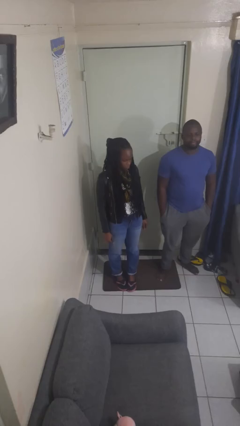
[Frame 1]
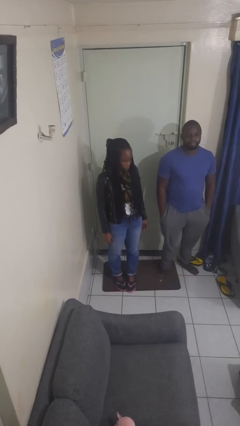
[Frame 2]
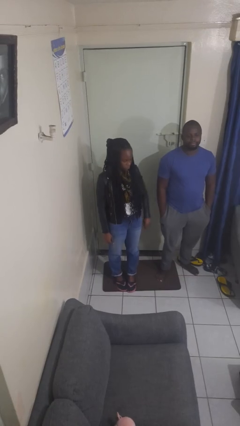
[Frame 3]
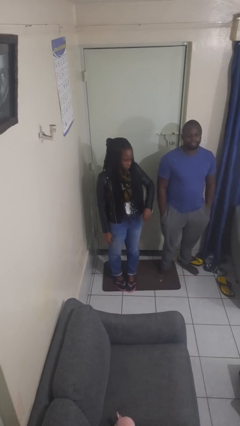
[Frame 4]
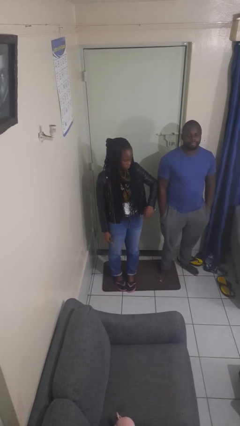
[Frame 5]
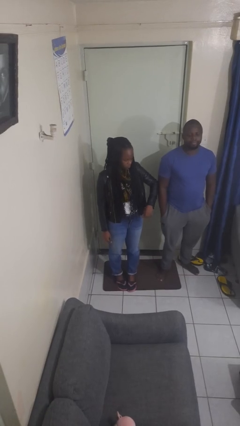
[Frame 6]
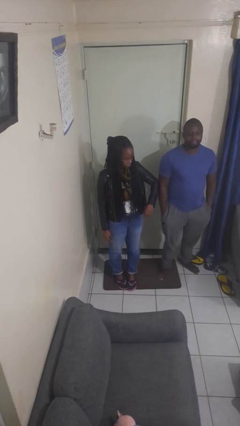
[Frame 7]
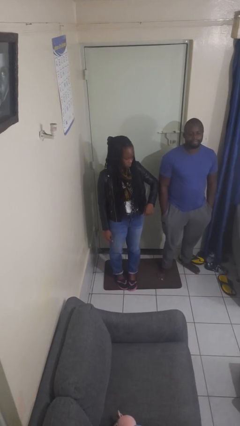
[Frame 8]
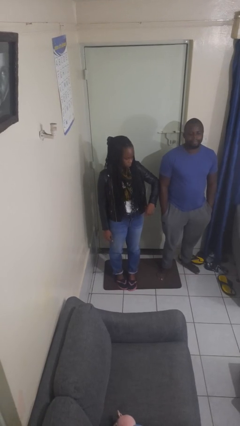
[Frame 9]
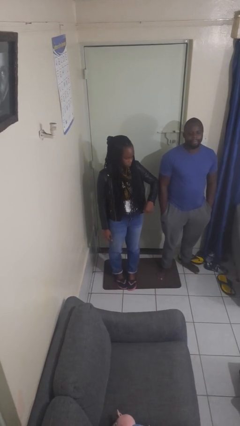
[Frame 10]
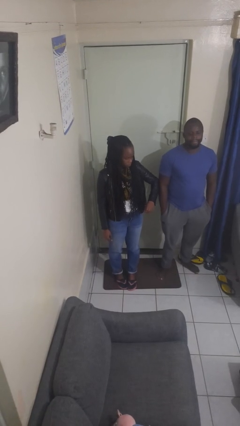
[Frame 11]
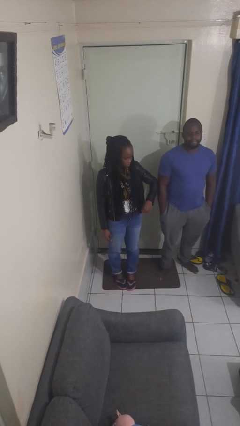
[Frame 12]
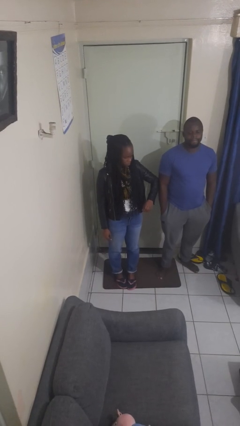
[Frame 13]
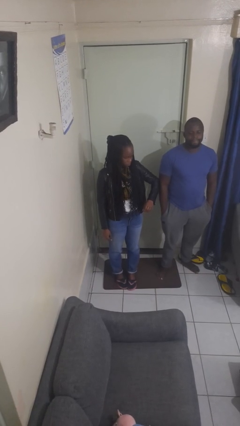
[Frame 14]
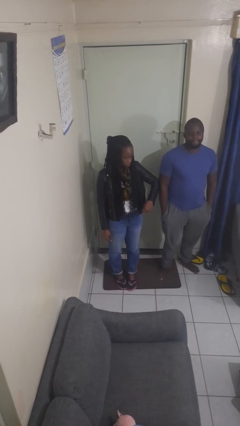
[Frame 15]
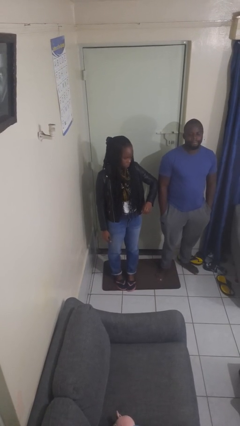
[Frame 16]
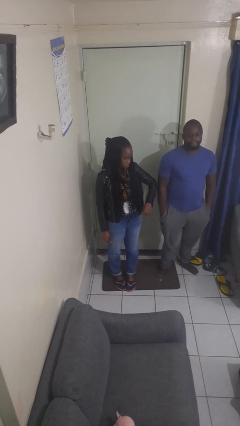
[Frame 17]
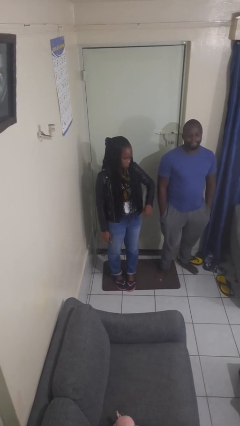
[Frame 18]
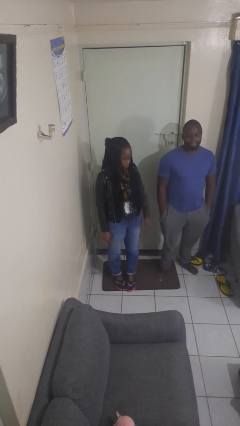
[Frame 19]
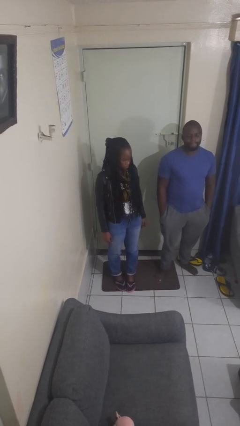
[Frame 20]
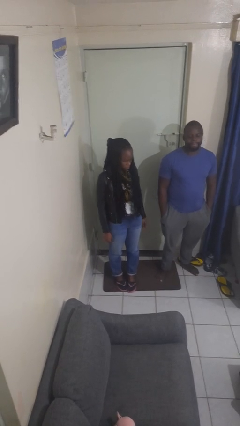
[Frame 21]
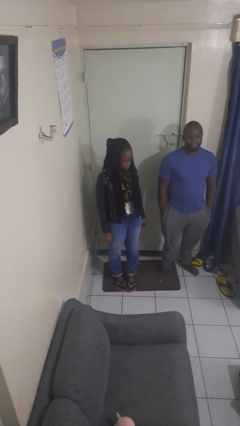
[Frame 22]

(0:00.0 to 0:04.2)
person nudges person with elbow

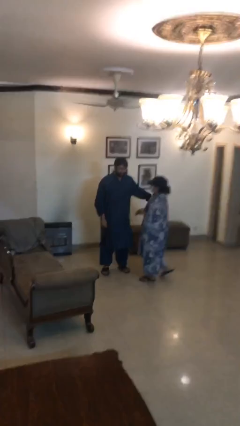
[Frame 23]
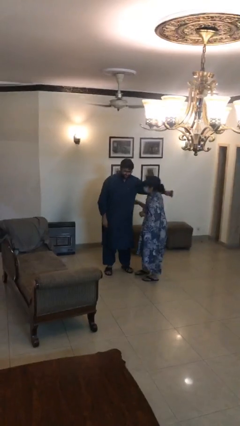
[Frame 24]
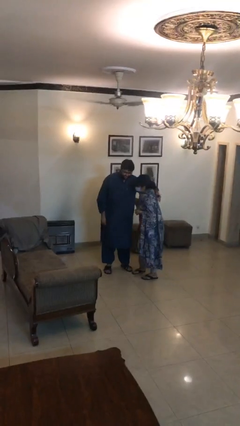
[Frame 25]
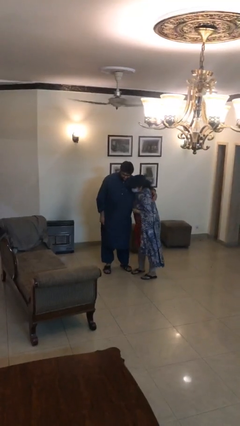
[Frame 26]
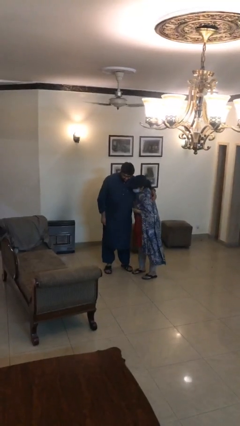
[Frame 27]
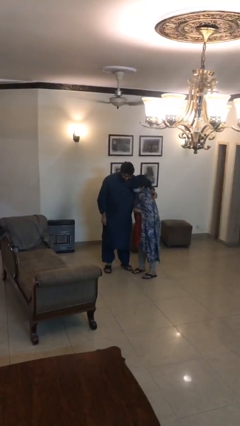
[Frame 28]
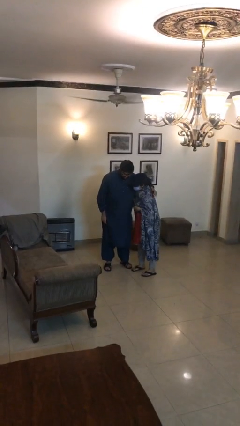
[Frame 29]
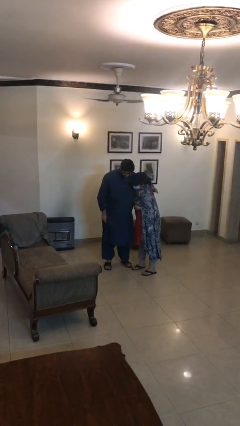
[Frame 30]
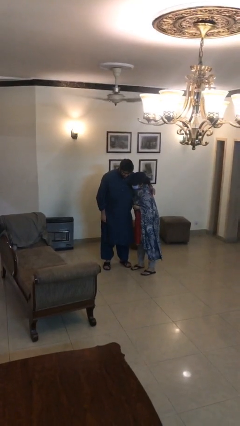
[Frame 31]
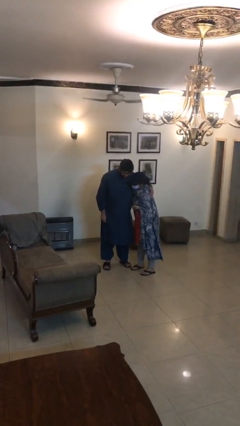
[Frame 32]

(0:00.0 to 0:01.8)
person embraces person

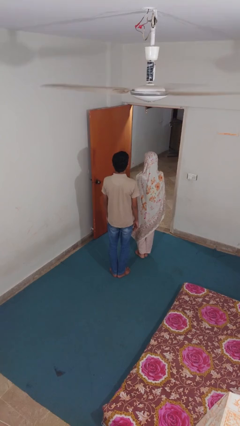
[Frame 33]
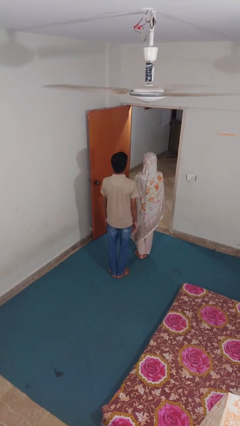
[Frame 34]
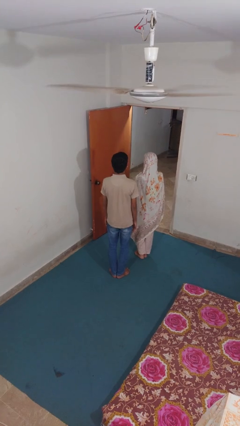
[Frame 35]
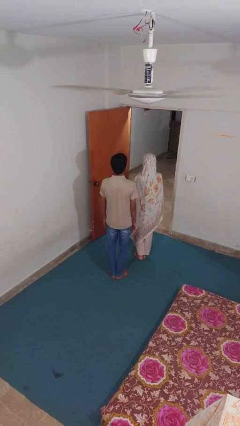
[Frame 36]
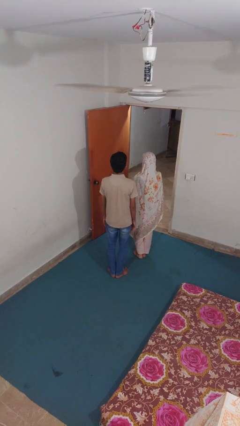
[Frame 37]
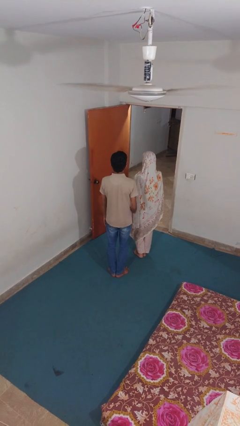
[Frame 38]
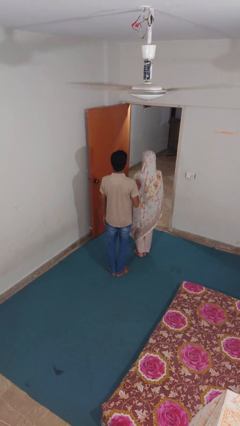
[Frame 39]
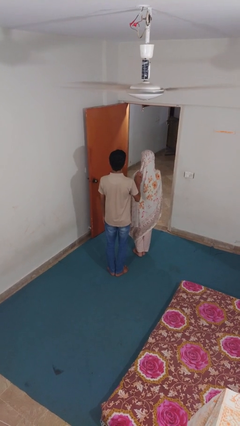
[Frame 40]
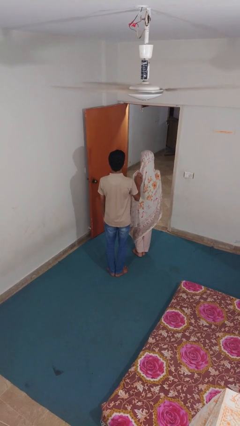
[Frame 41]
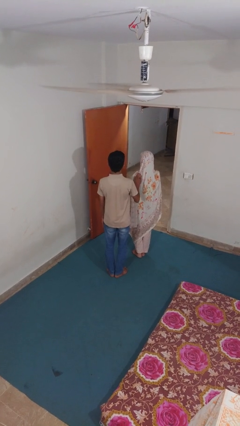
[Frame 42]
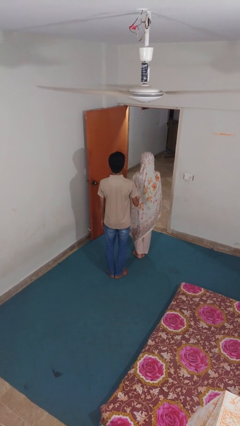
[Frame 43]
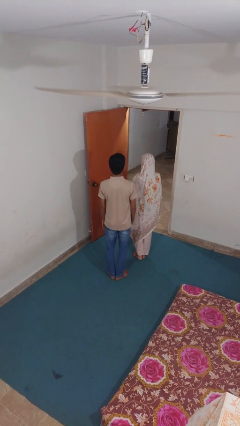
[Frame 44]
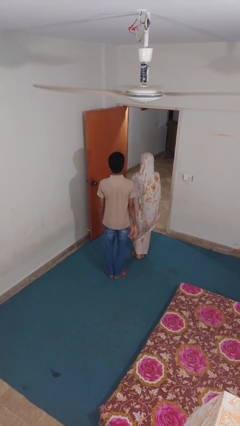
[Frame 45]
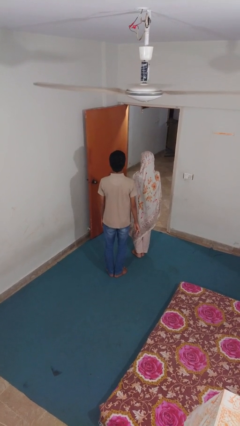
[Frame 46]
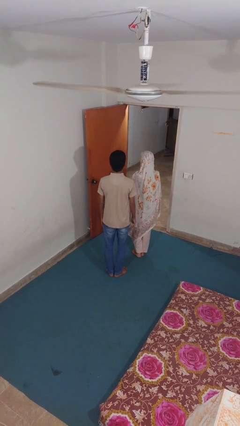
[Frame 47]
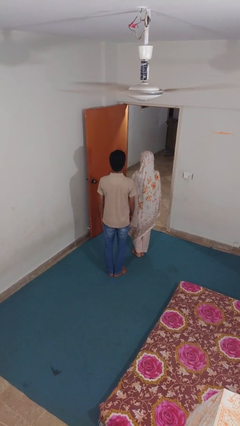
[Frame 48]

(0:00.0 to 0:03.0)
person touches back of person

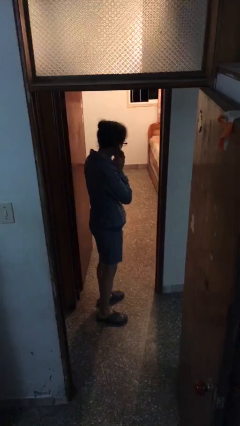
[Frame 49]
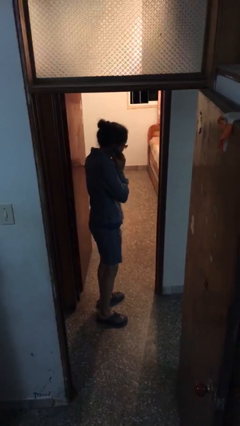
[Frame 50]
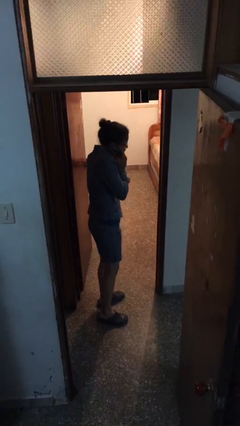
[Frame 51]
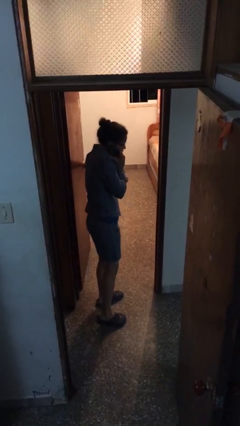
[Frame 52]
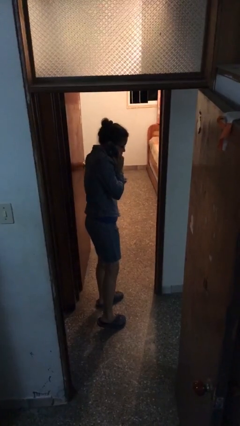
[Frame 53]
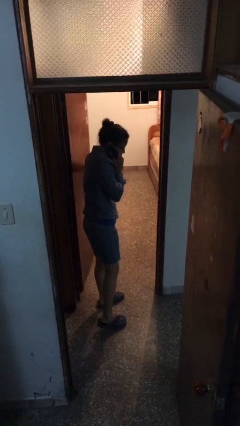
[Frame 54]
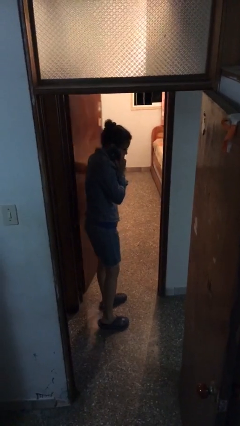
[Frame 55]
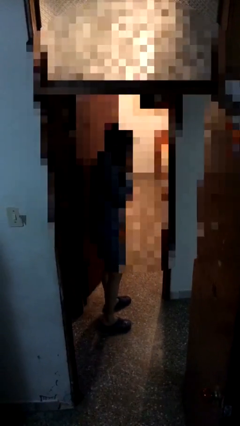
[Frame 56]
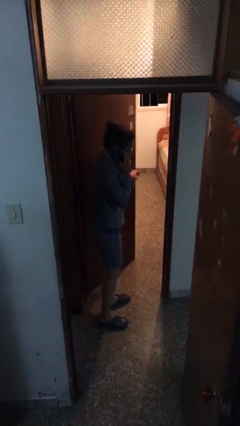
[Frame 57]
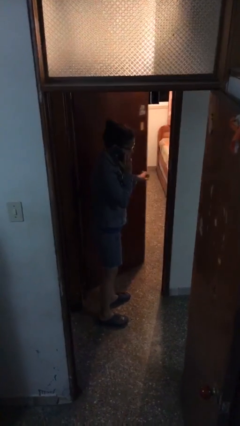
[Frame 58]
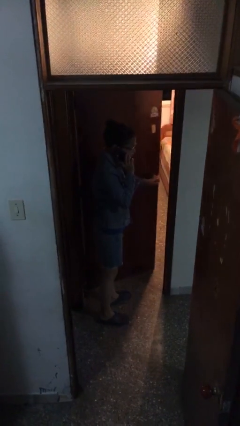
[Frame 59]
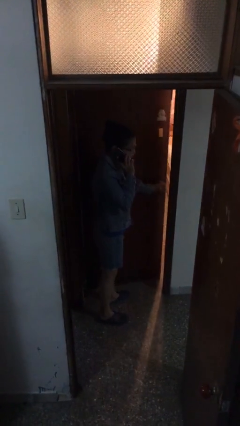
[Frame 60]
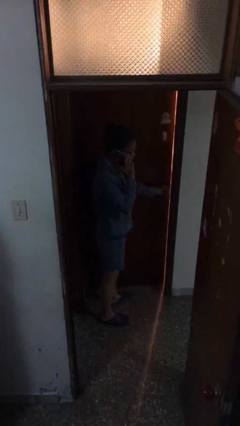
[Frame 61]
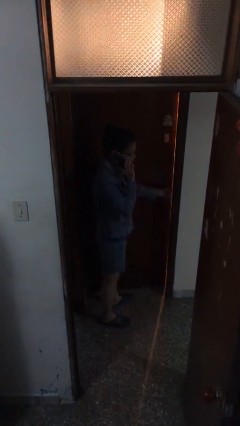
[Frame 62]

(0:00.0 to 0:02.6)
person closes facility door

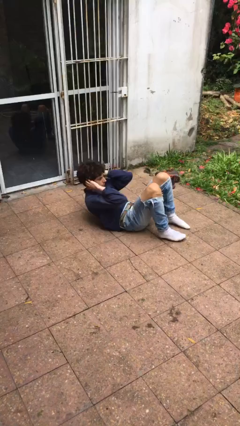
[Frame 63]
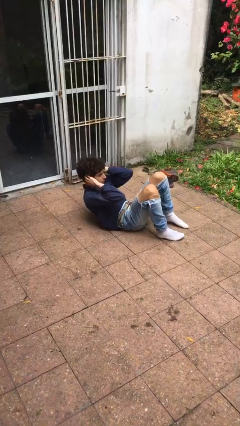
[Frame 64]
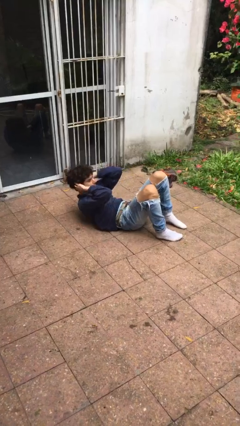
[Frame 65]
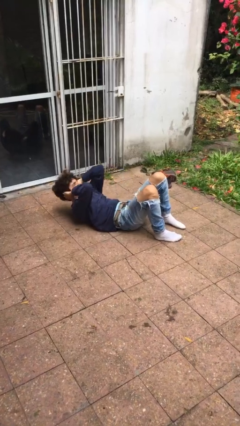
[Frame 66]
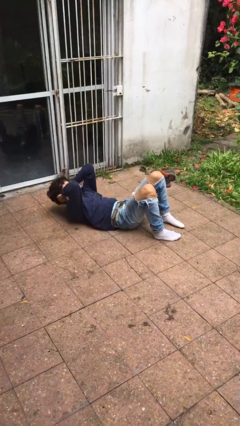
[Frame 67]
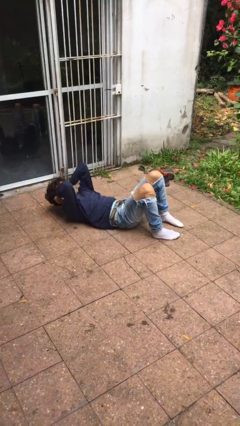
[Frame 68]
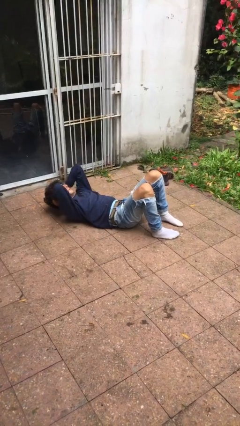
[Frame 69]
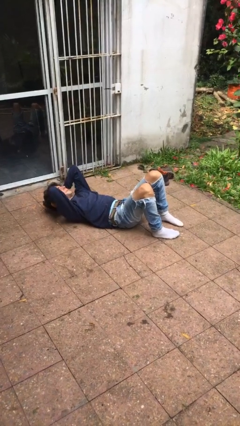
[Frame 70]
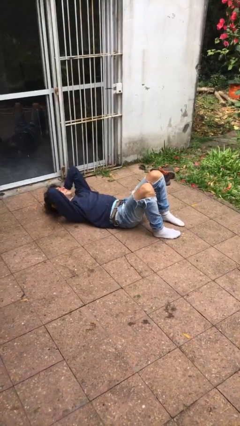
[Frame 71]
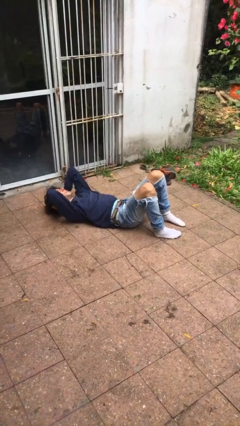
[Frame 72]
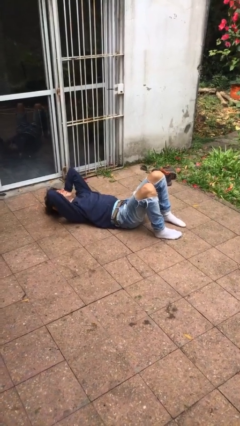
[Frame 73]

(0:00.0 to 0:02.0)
person exercises with situp

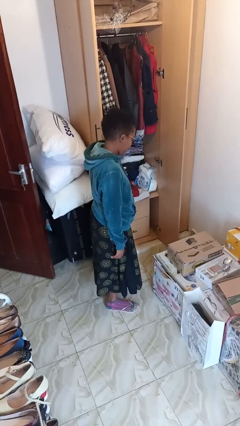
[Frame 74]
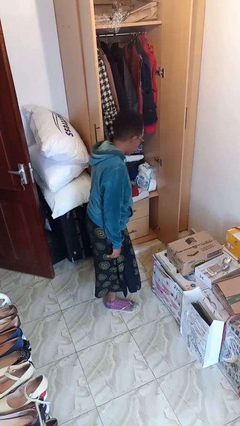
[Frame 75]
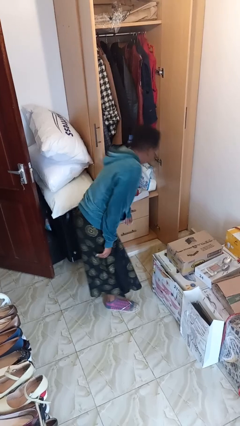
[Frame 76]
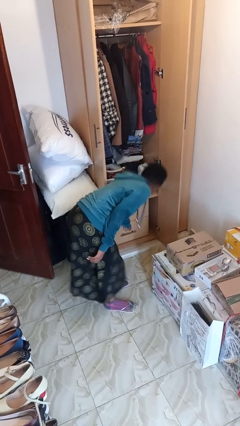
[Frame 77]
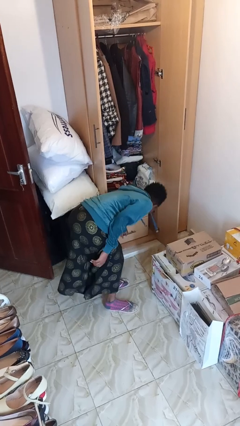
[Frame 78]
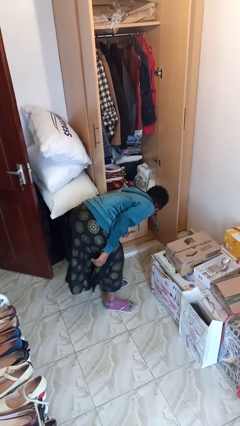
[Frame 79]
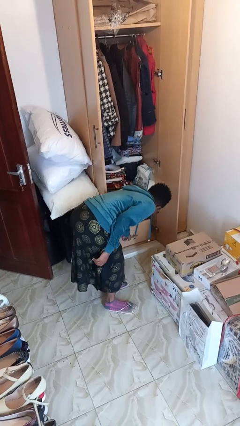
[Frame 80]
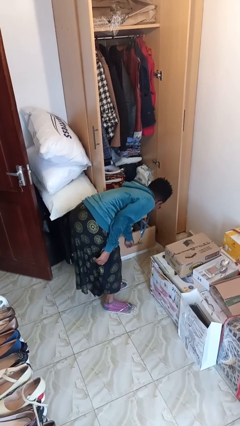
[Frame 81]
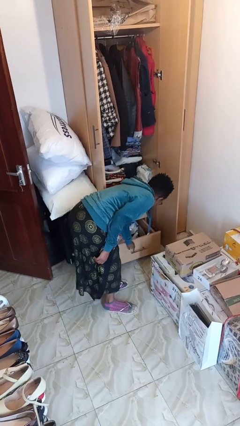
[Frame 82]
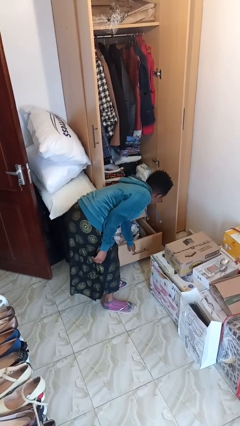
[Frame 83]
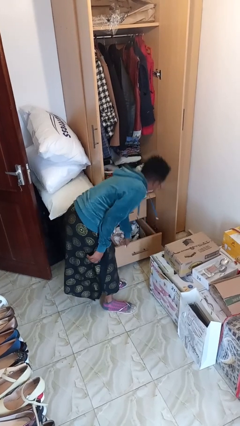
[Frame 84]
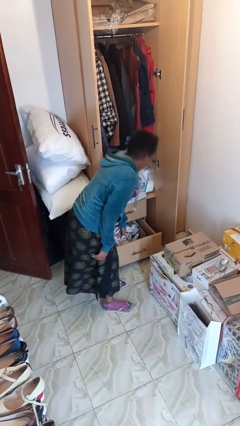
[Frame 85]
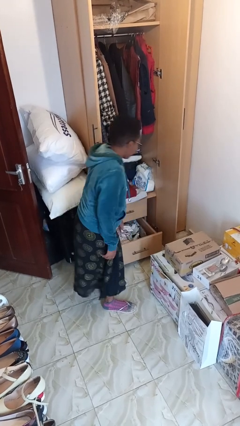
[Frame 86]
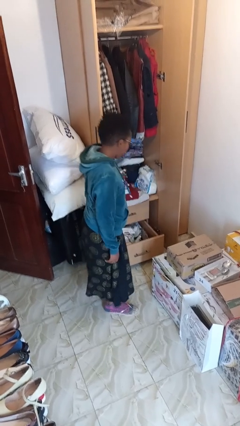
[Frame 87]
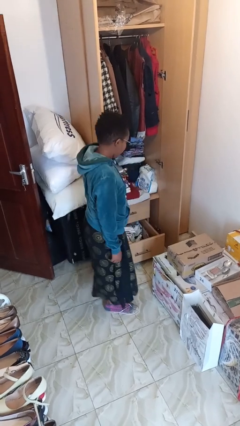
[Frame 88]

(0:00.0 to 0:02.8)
person opens dresser drawer

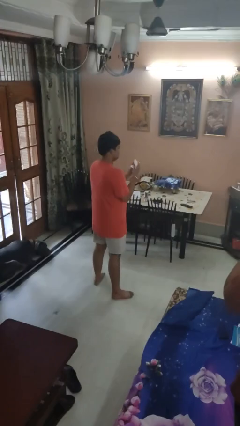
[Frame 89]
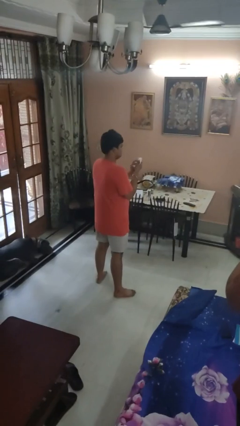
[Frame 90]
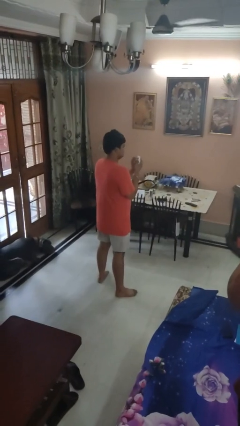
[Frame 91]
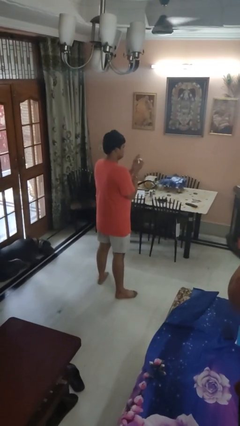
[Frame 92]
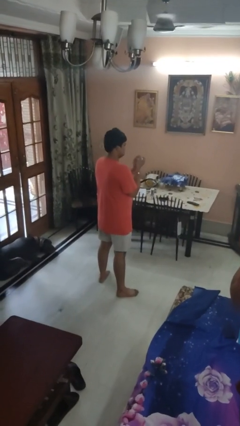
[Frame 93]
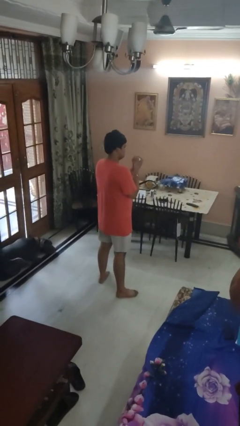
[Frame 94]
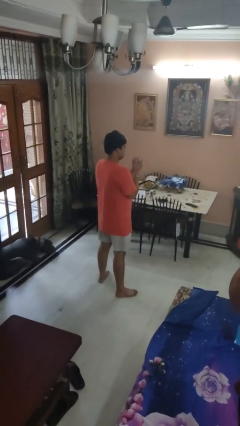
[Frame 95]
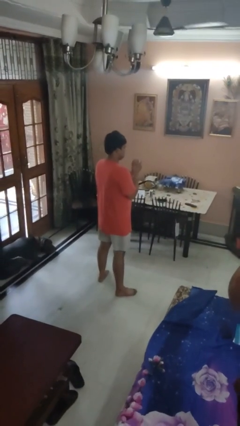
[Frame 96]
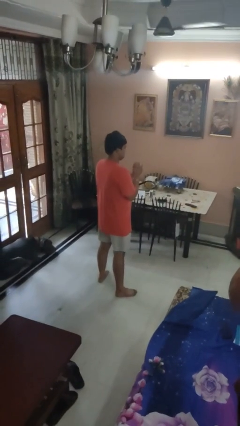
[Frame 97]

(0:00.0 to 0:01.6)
person crumples paper
